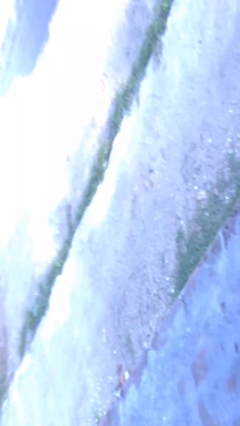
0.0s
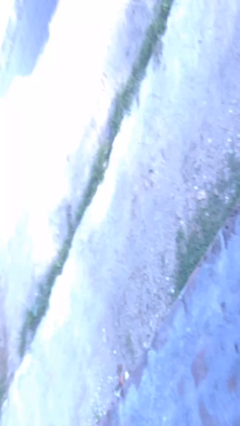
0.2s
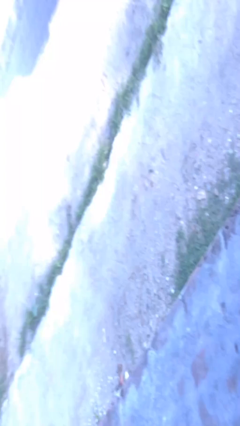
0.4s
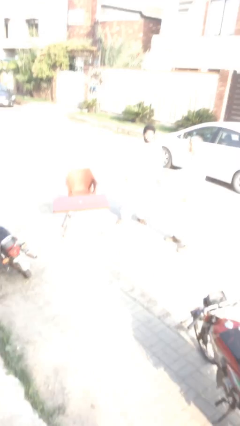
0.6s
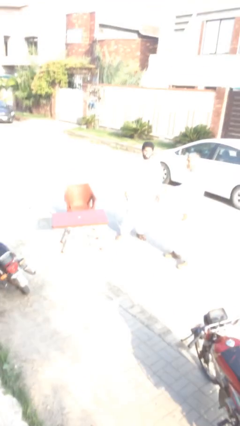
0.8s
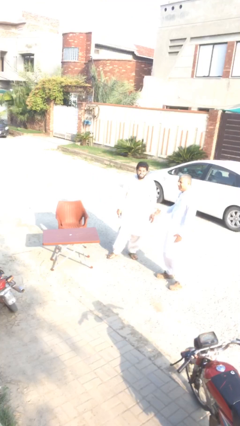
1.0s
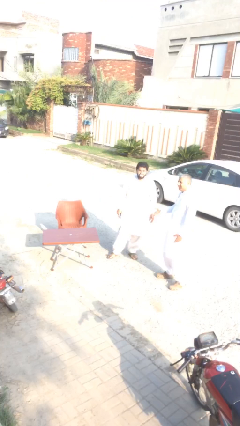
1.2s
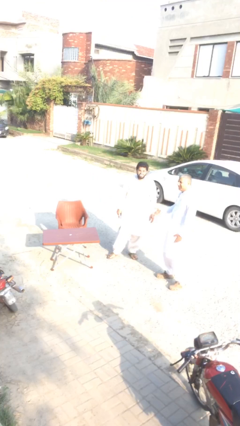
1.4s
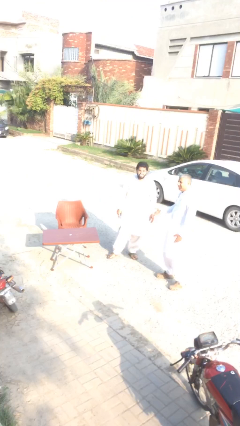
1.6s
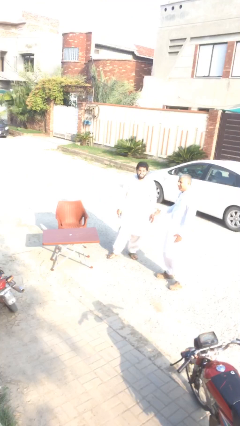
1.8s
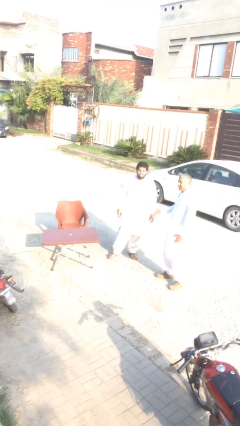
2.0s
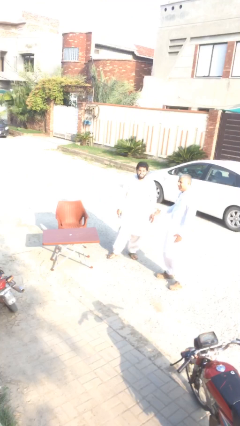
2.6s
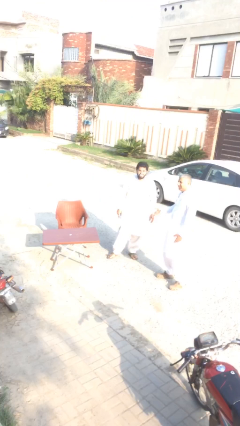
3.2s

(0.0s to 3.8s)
person puts down object on table

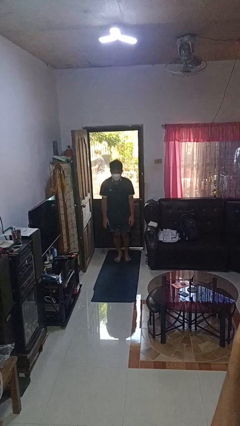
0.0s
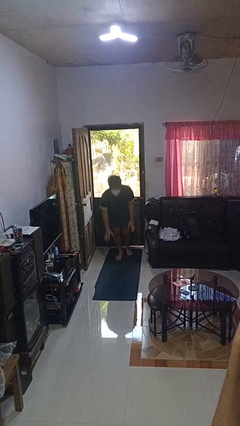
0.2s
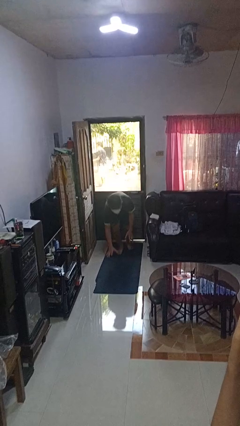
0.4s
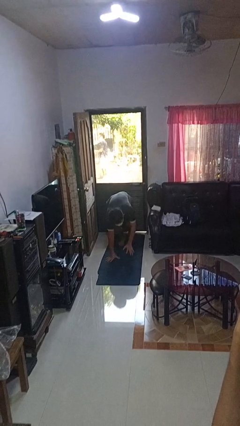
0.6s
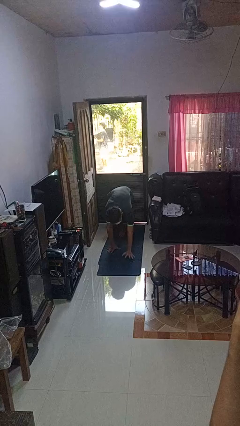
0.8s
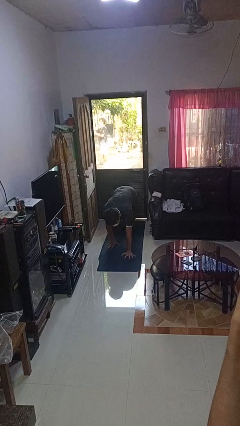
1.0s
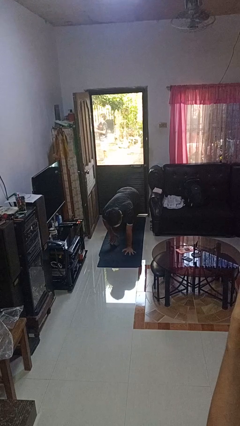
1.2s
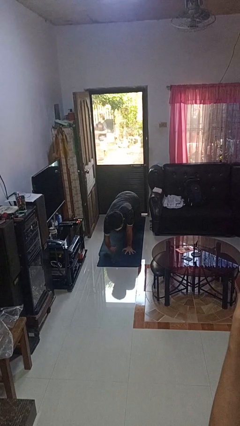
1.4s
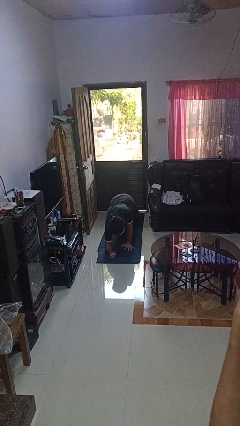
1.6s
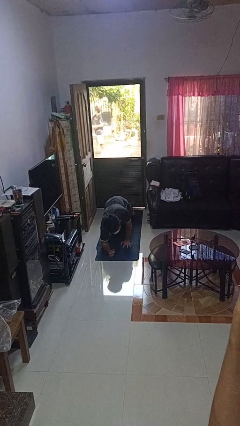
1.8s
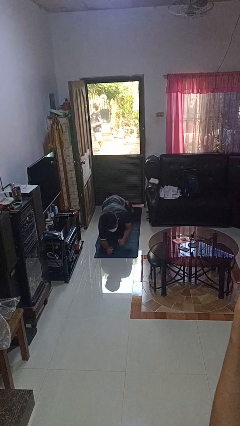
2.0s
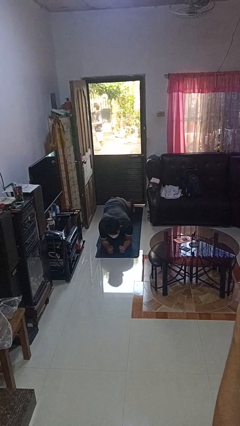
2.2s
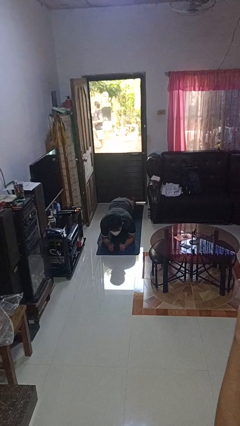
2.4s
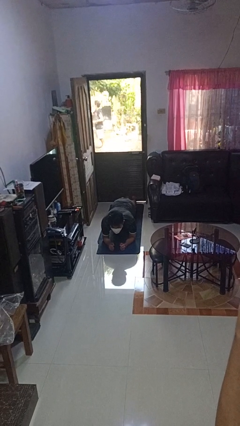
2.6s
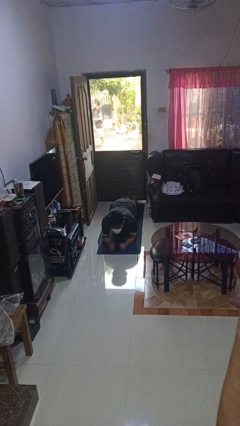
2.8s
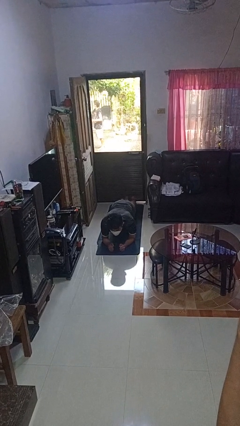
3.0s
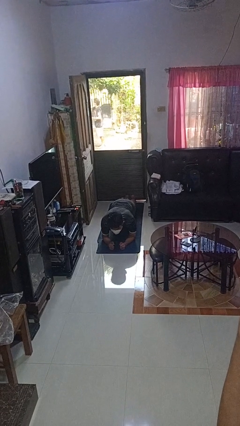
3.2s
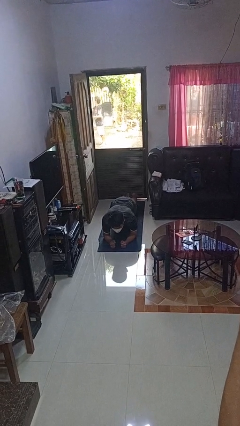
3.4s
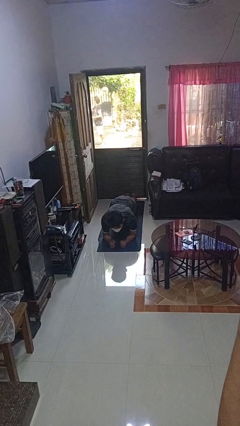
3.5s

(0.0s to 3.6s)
person exercises with plank

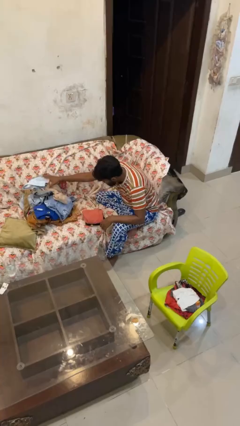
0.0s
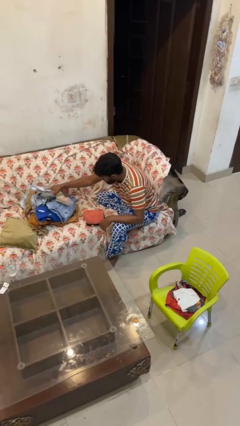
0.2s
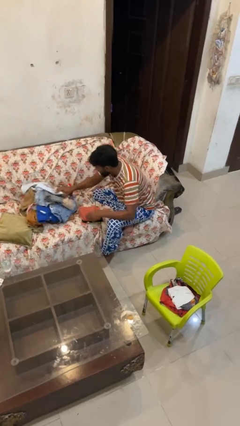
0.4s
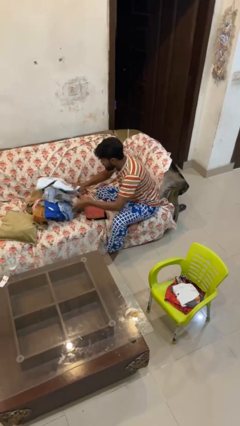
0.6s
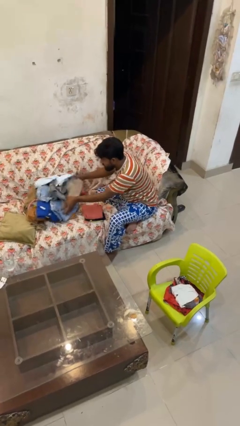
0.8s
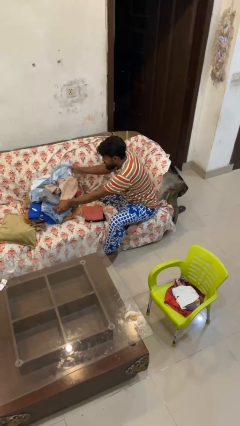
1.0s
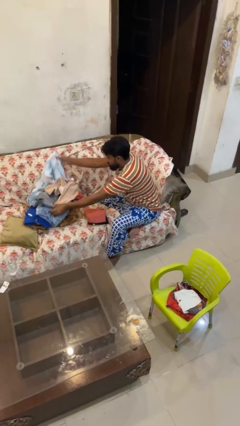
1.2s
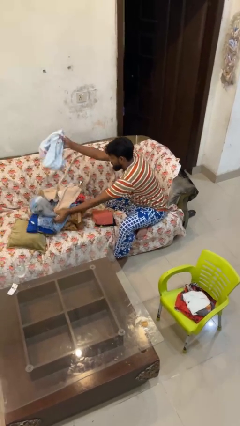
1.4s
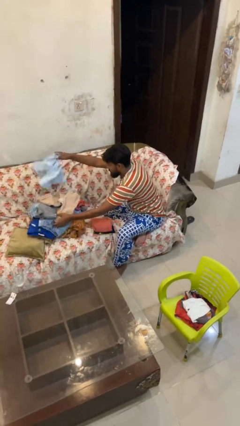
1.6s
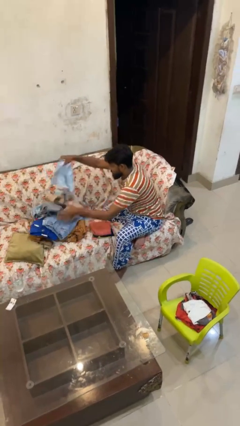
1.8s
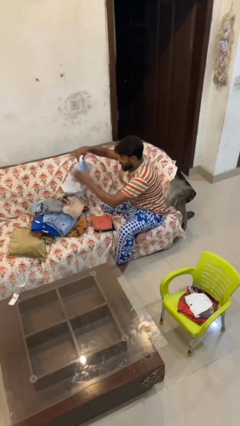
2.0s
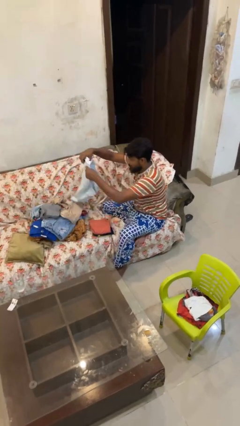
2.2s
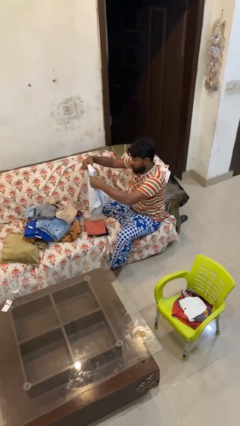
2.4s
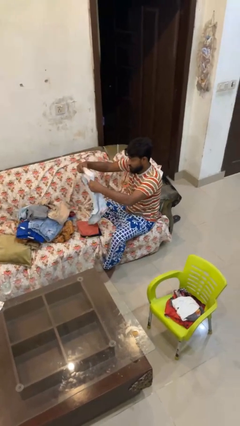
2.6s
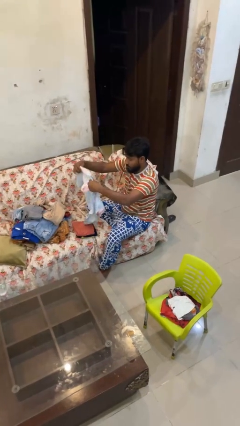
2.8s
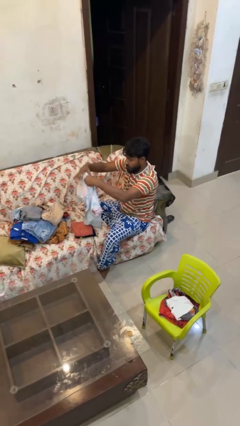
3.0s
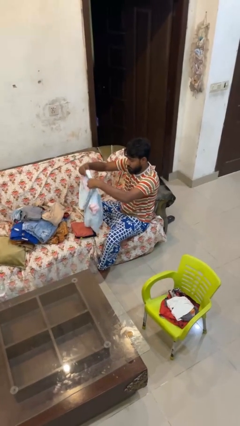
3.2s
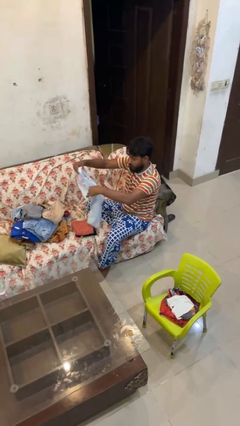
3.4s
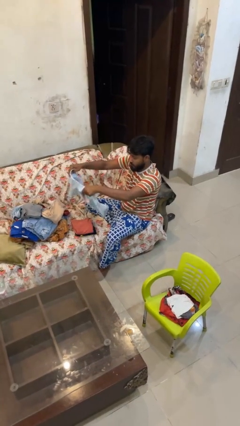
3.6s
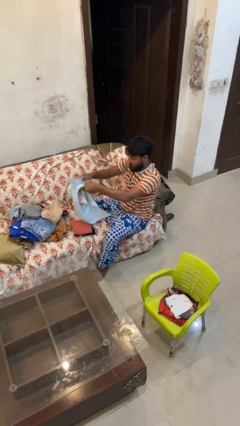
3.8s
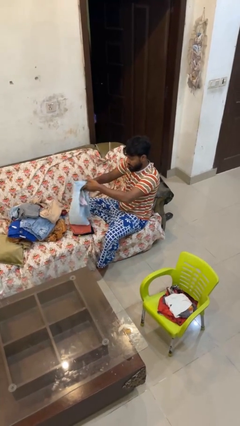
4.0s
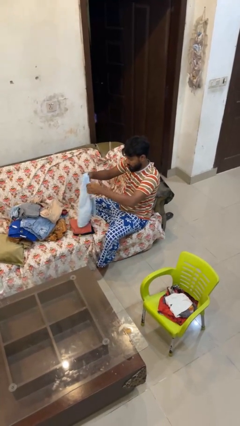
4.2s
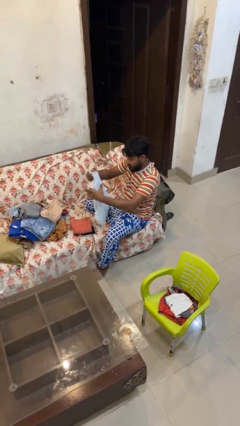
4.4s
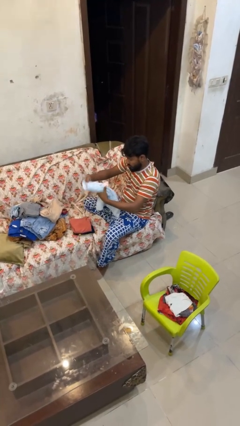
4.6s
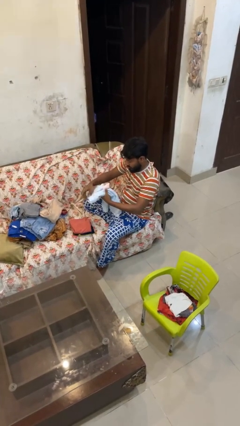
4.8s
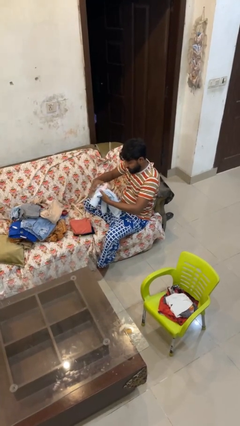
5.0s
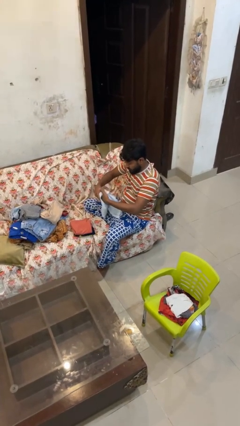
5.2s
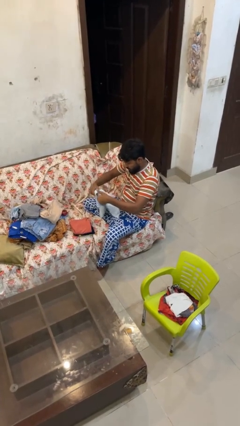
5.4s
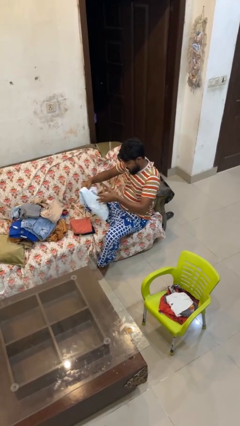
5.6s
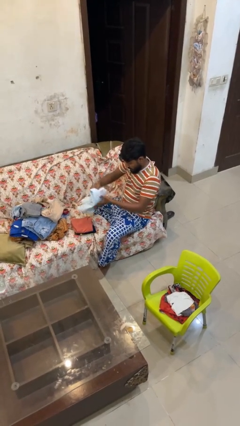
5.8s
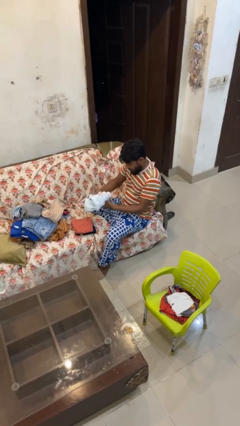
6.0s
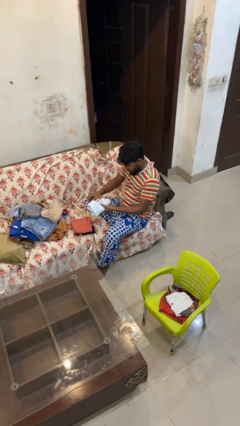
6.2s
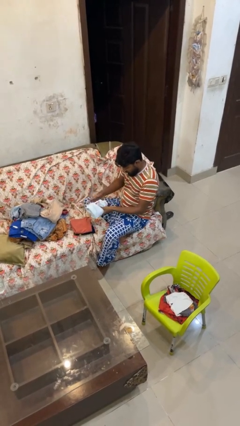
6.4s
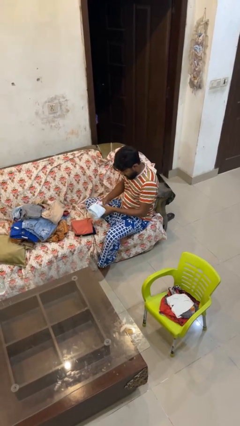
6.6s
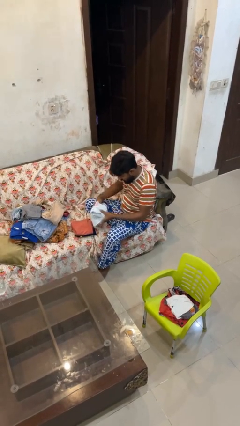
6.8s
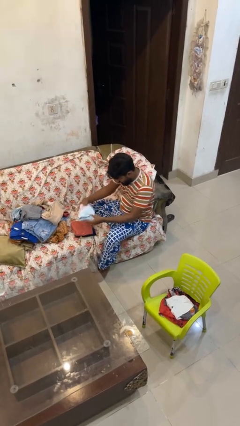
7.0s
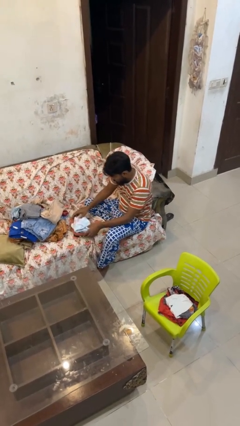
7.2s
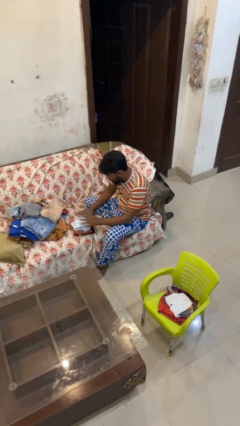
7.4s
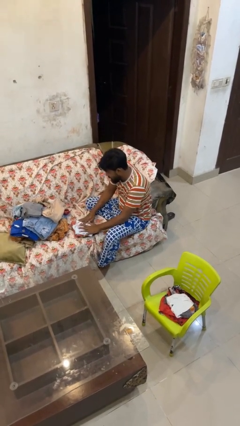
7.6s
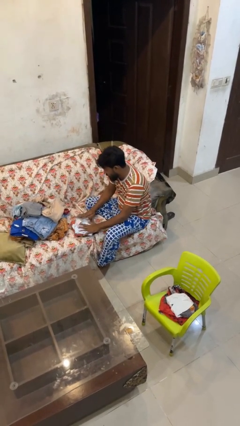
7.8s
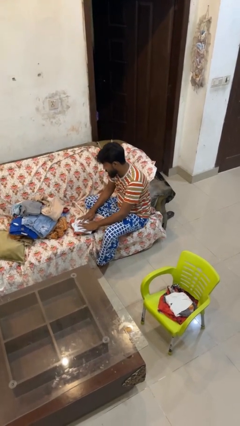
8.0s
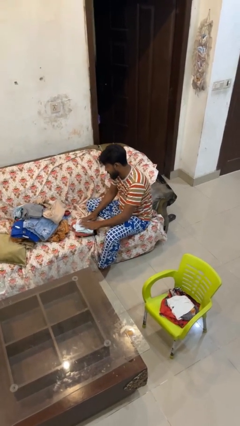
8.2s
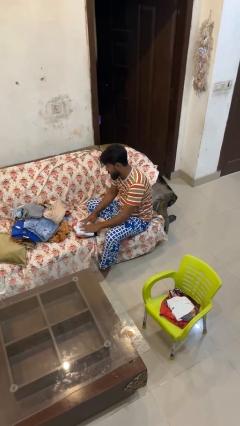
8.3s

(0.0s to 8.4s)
person folds shirt

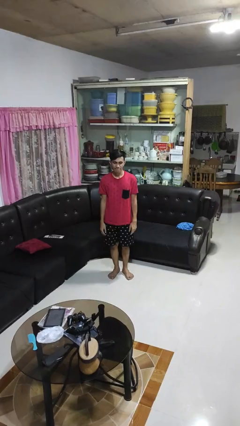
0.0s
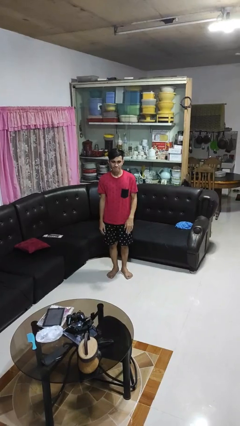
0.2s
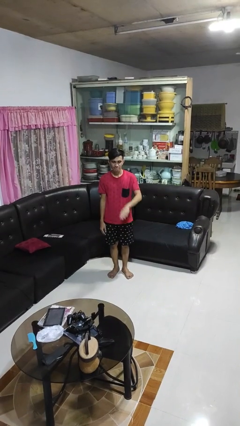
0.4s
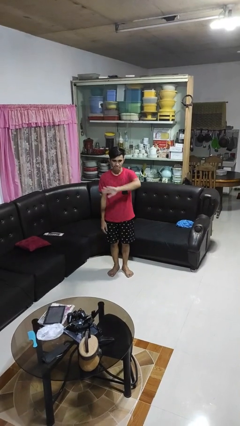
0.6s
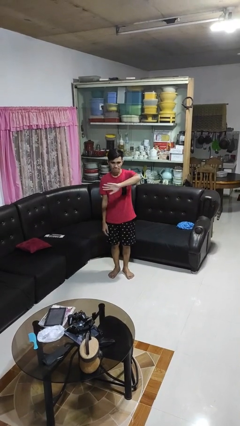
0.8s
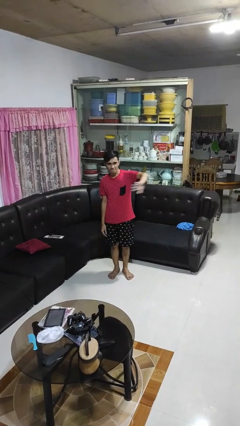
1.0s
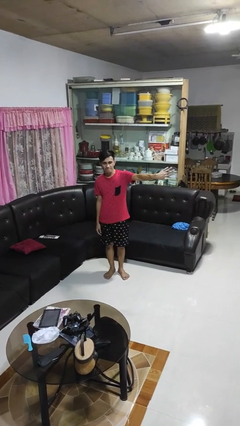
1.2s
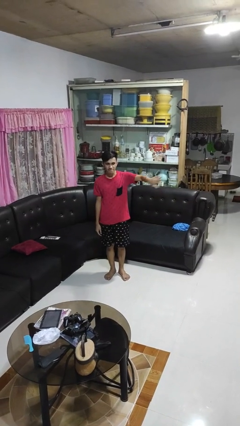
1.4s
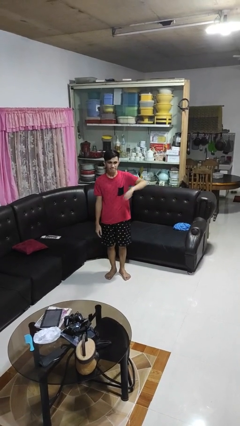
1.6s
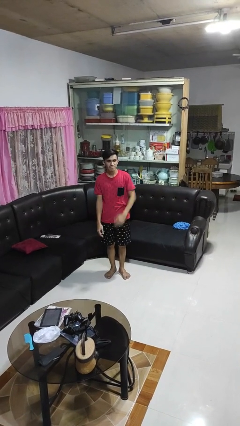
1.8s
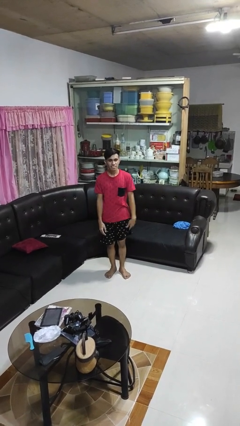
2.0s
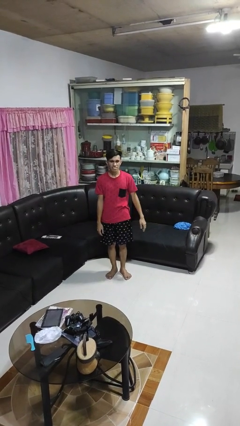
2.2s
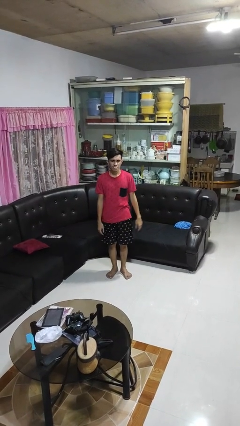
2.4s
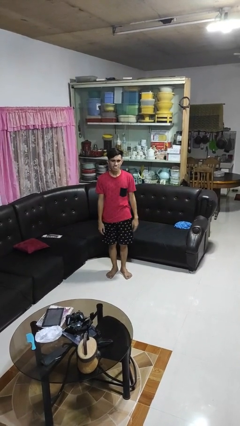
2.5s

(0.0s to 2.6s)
person gestures swipe left

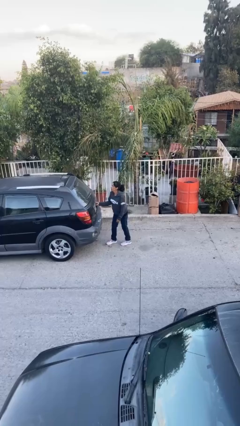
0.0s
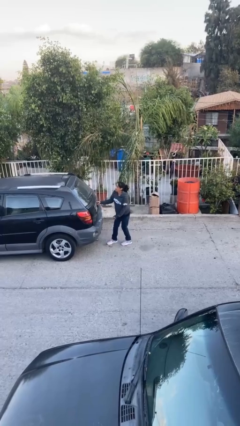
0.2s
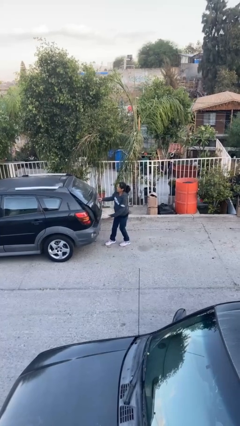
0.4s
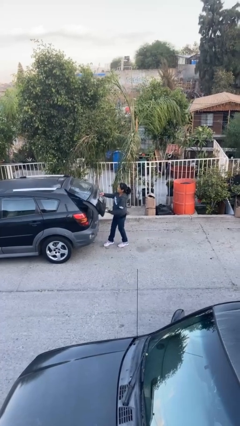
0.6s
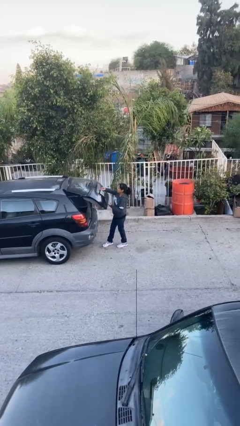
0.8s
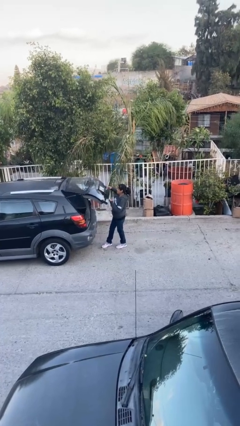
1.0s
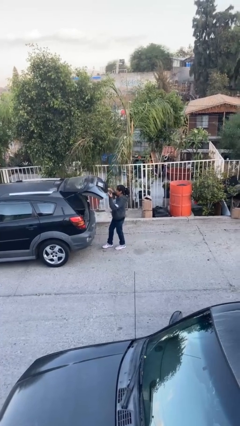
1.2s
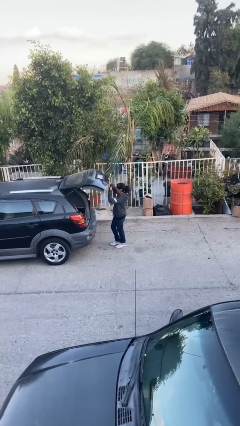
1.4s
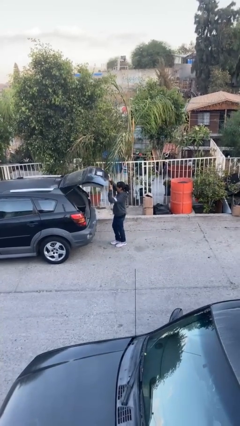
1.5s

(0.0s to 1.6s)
person closes car trunk
